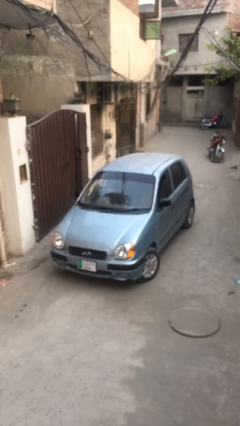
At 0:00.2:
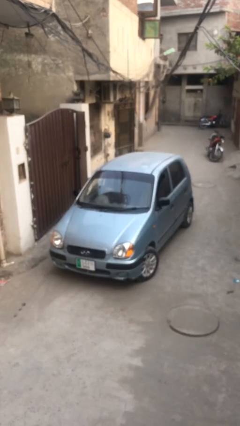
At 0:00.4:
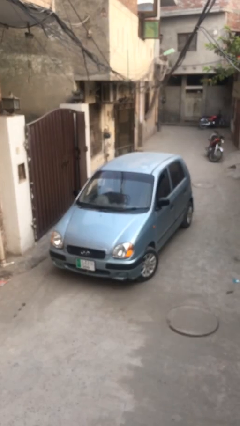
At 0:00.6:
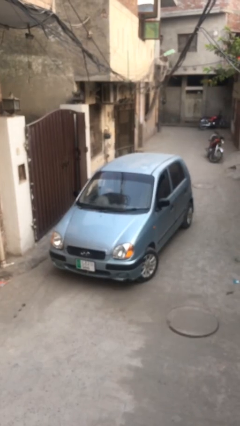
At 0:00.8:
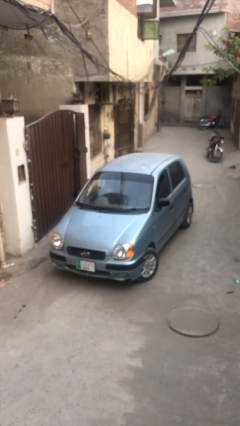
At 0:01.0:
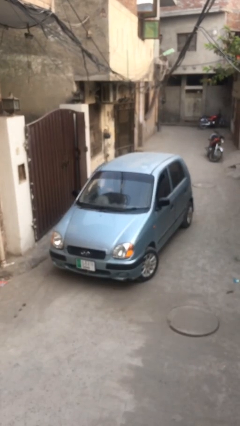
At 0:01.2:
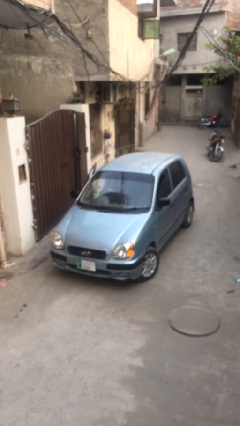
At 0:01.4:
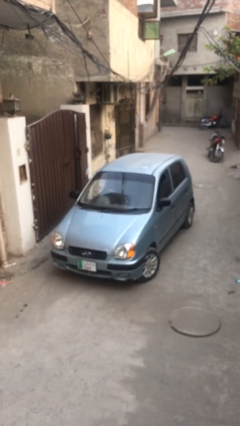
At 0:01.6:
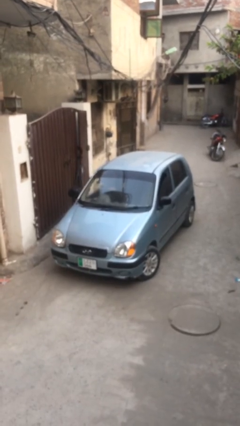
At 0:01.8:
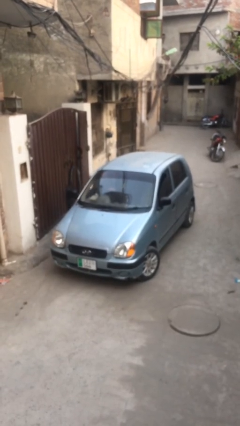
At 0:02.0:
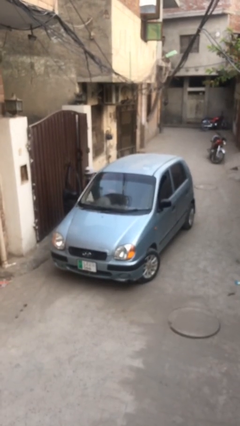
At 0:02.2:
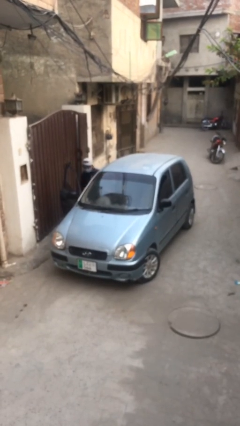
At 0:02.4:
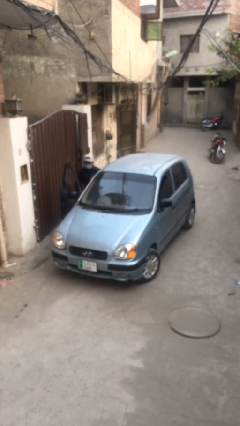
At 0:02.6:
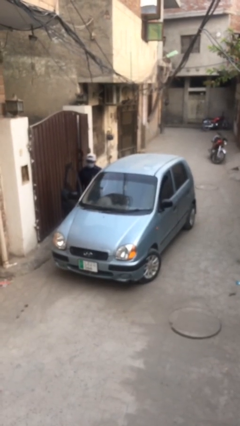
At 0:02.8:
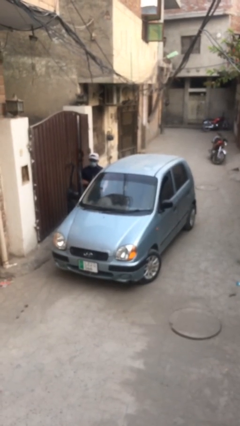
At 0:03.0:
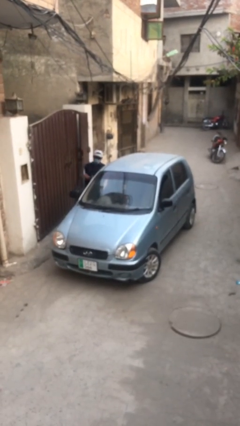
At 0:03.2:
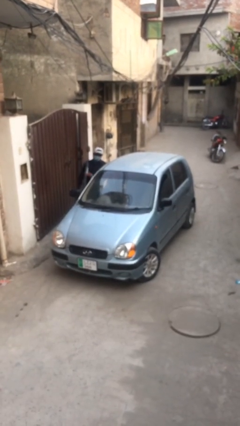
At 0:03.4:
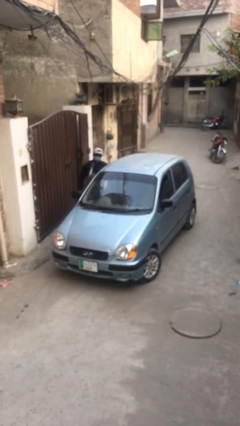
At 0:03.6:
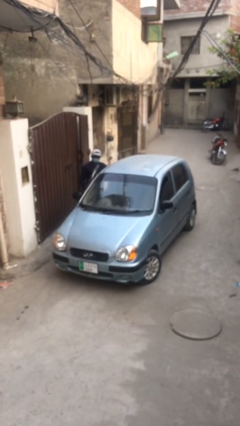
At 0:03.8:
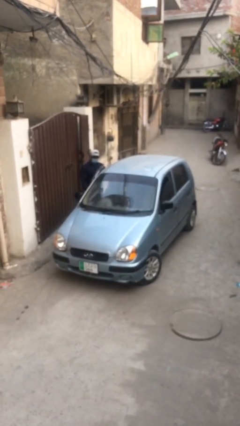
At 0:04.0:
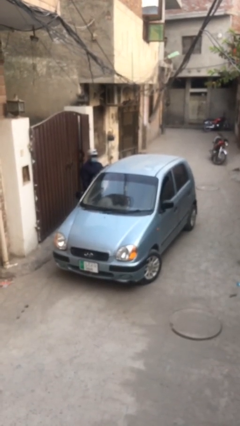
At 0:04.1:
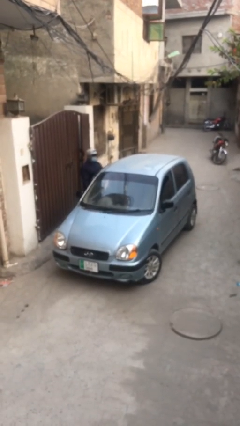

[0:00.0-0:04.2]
car drops off person

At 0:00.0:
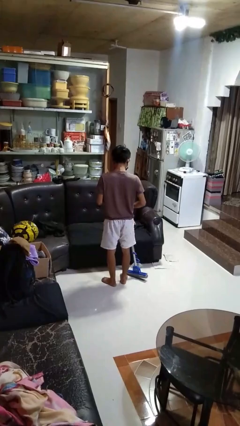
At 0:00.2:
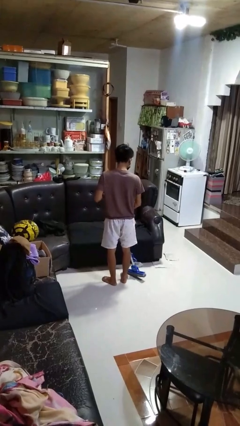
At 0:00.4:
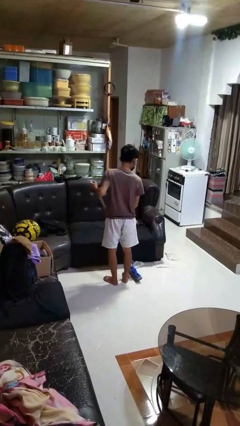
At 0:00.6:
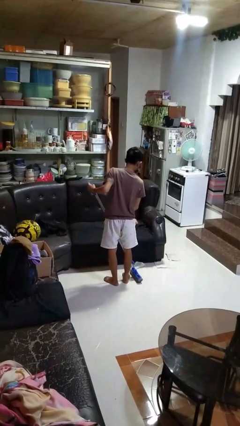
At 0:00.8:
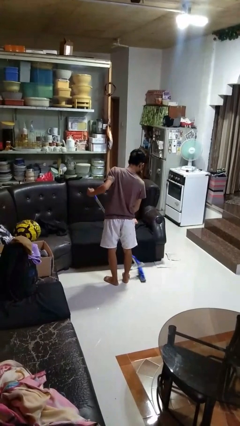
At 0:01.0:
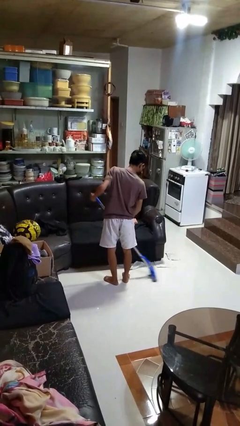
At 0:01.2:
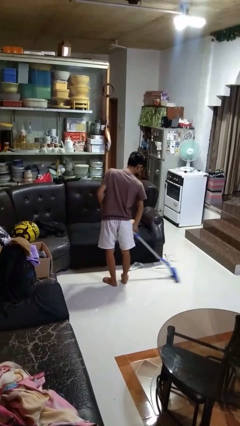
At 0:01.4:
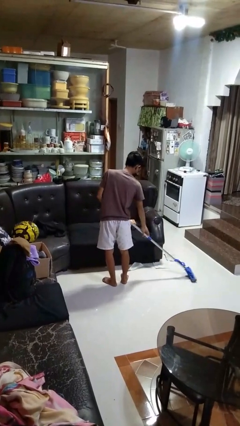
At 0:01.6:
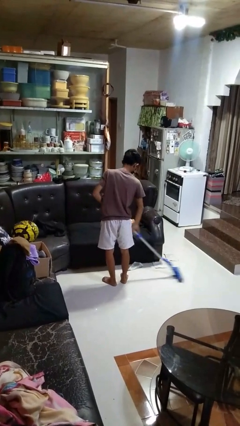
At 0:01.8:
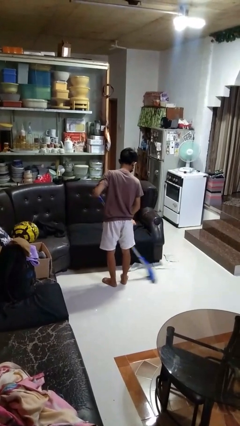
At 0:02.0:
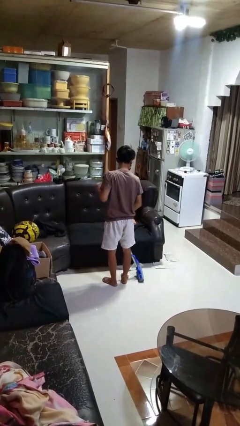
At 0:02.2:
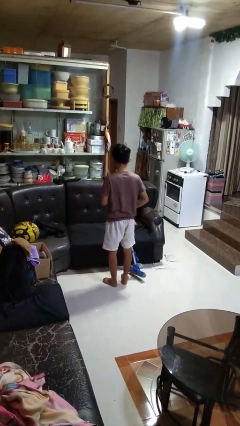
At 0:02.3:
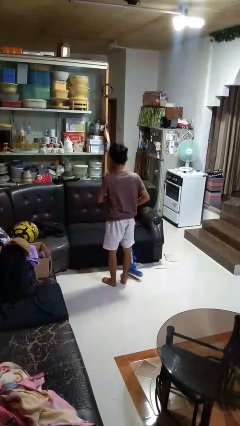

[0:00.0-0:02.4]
person mops

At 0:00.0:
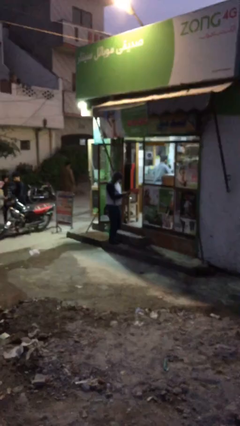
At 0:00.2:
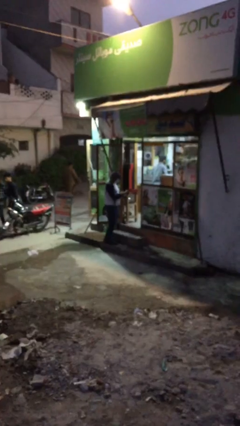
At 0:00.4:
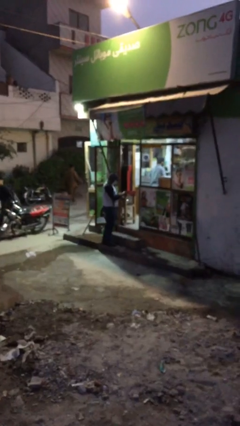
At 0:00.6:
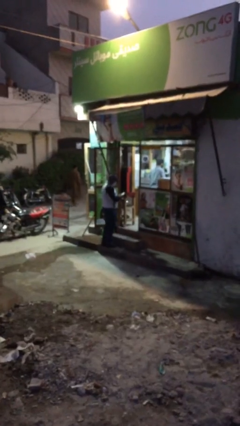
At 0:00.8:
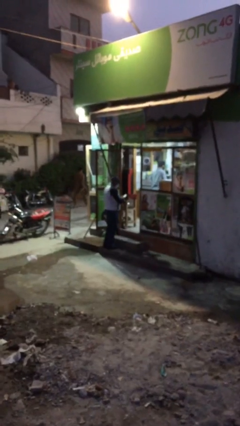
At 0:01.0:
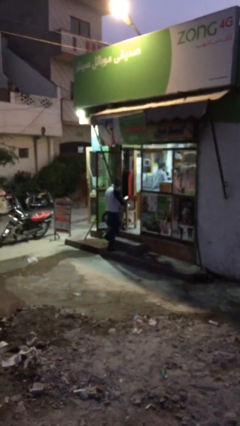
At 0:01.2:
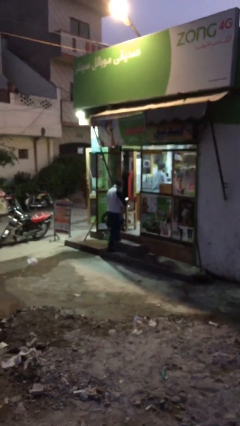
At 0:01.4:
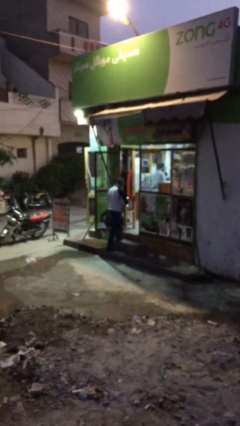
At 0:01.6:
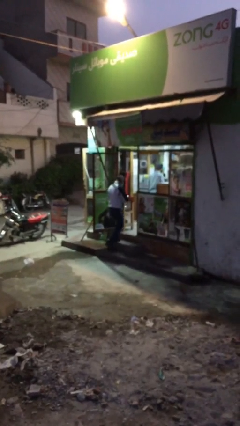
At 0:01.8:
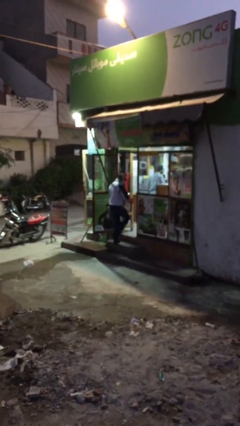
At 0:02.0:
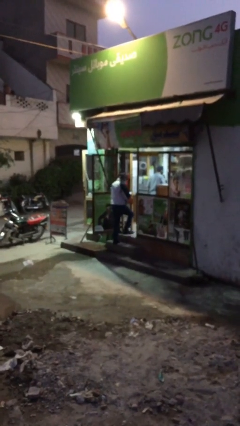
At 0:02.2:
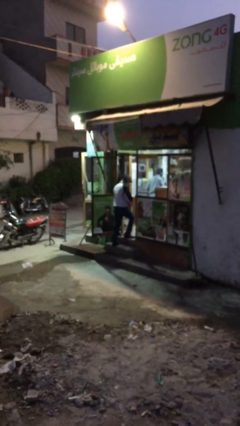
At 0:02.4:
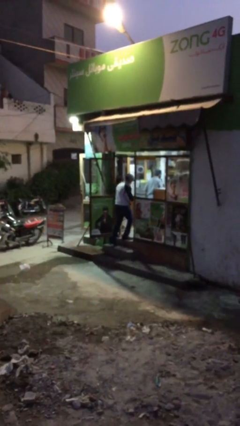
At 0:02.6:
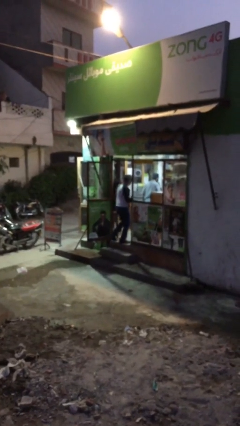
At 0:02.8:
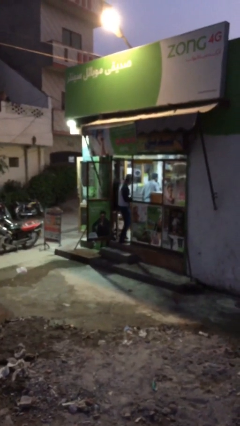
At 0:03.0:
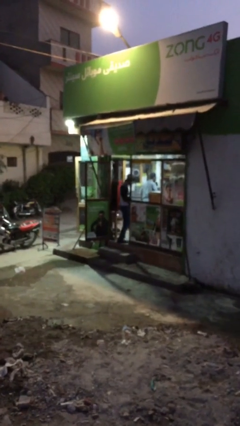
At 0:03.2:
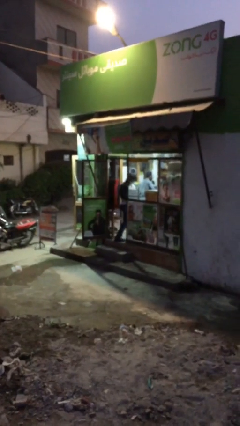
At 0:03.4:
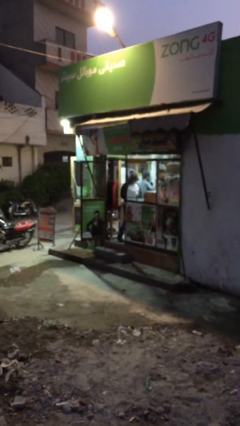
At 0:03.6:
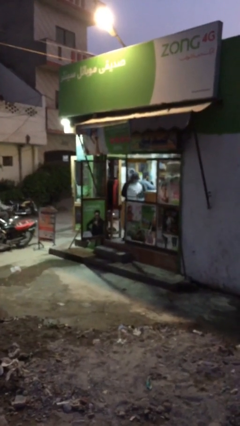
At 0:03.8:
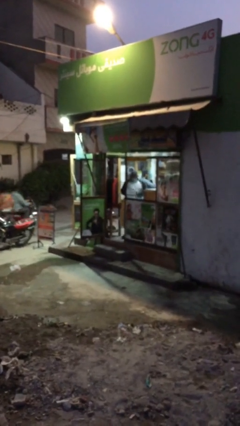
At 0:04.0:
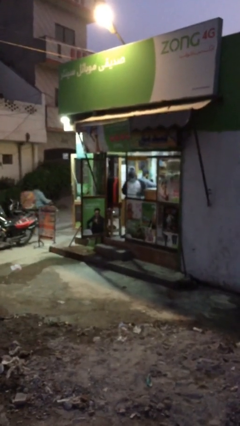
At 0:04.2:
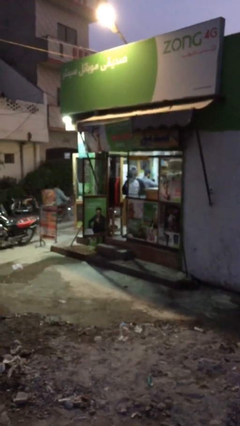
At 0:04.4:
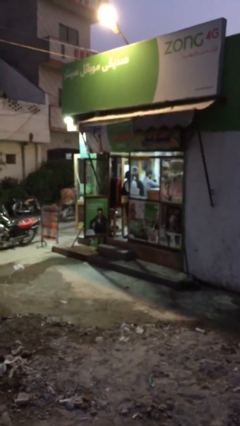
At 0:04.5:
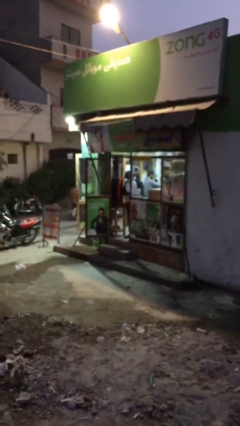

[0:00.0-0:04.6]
person enters scene through structure

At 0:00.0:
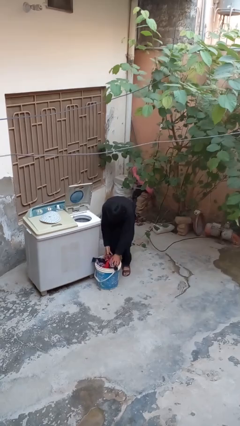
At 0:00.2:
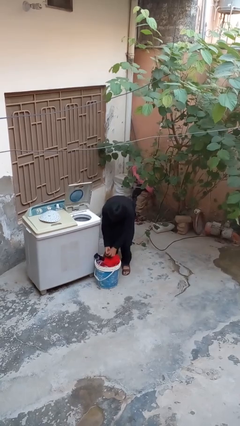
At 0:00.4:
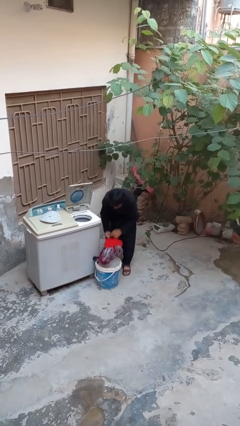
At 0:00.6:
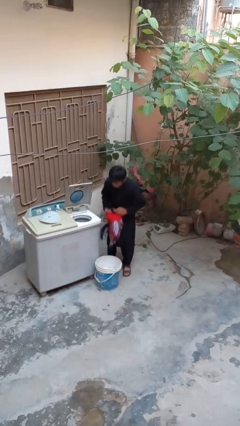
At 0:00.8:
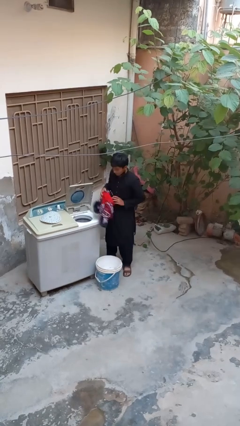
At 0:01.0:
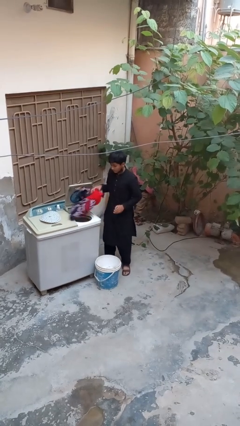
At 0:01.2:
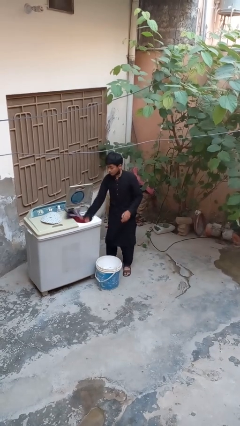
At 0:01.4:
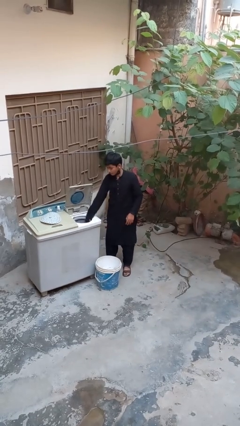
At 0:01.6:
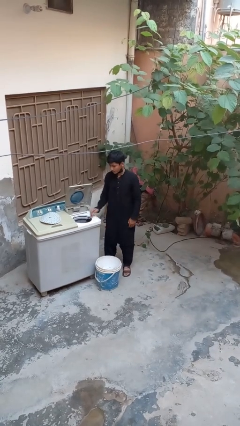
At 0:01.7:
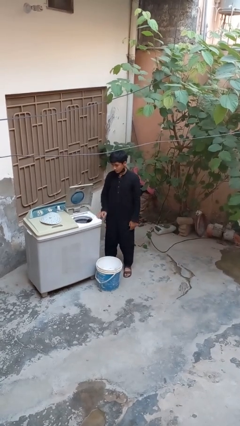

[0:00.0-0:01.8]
person loads dryer

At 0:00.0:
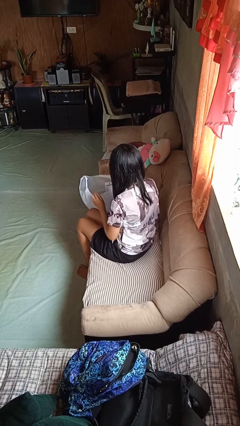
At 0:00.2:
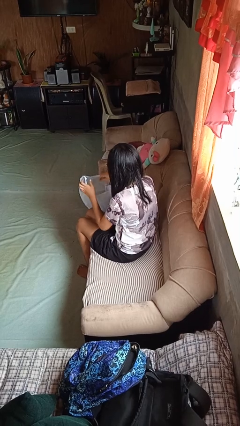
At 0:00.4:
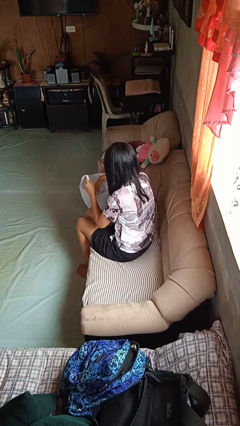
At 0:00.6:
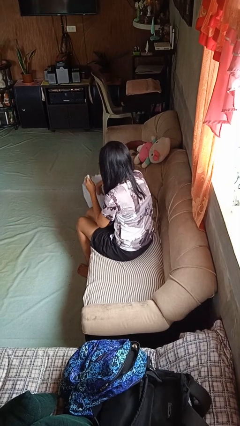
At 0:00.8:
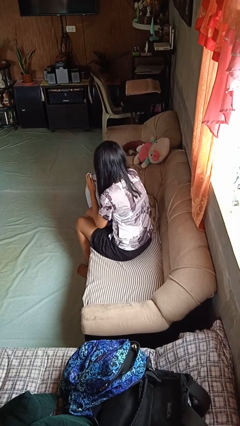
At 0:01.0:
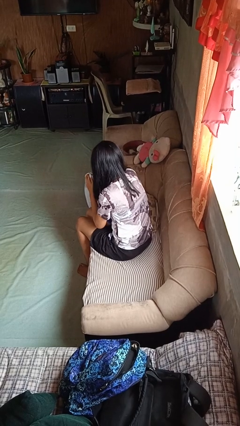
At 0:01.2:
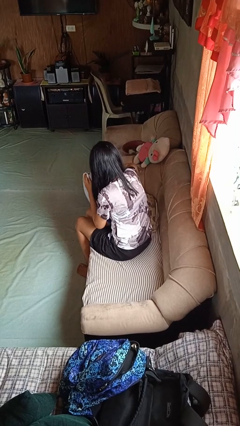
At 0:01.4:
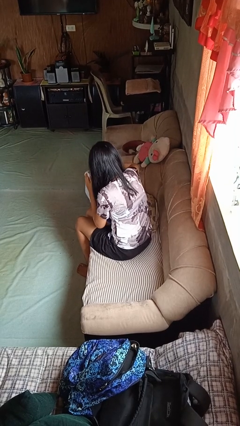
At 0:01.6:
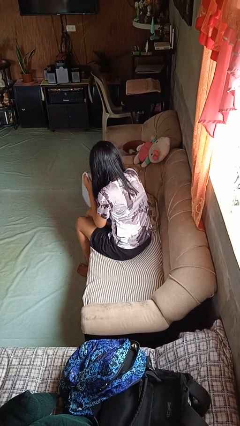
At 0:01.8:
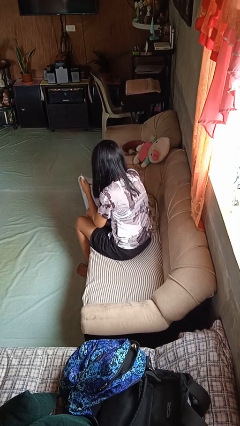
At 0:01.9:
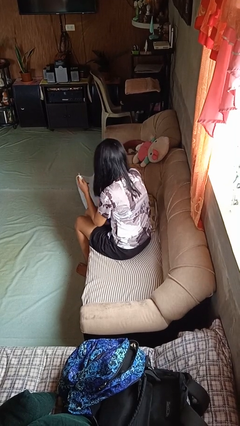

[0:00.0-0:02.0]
person searches in bag

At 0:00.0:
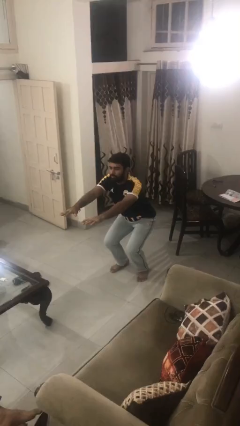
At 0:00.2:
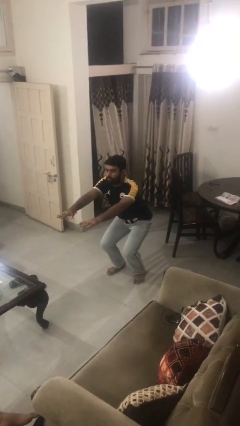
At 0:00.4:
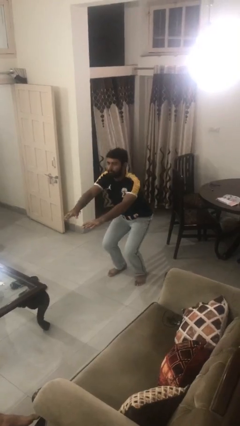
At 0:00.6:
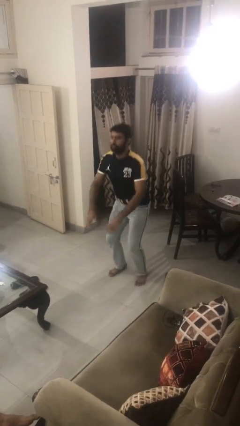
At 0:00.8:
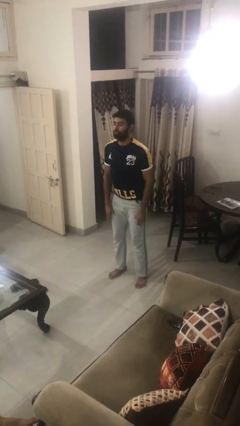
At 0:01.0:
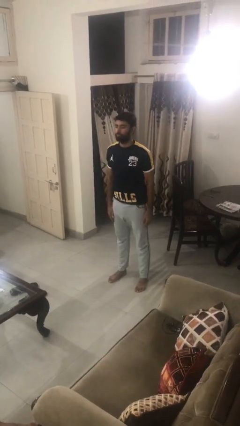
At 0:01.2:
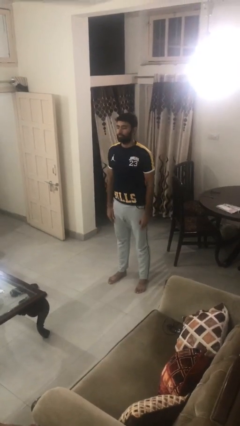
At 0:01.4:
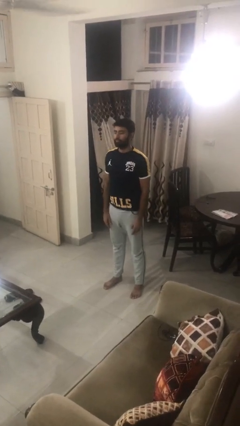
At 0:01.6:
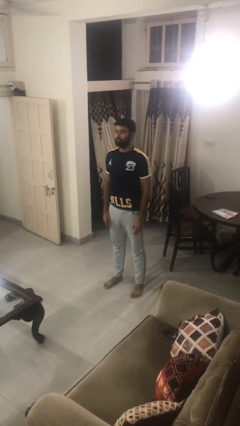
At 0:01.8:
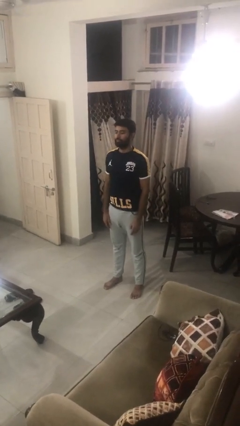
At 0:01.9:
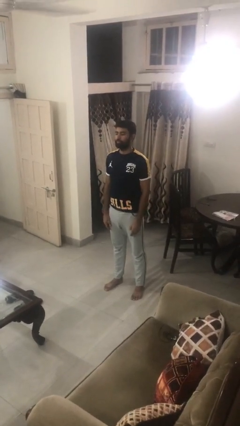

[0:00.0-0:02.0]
person stands up

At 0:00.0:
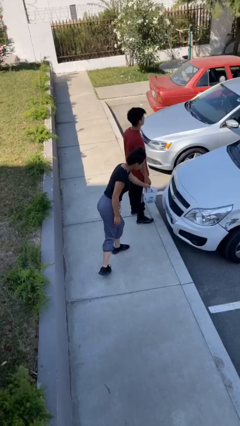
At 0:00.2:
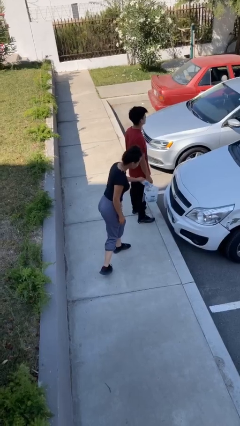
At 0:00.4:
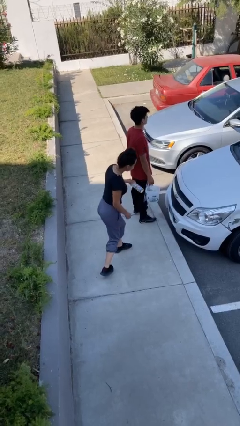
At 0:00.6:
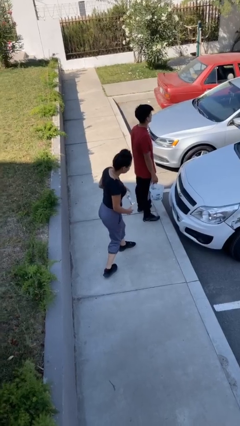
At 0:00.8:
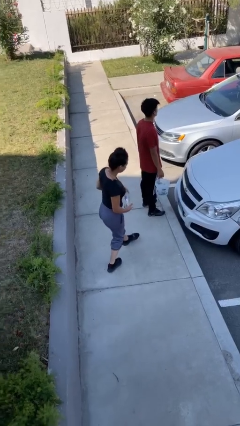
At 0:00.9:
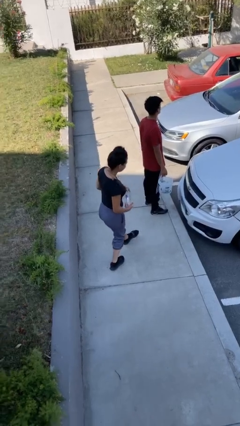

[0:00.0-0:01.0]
person steals object from person
